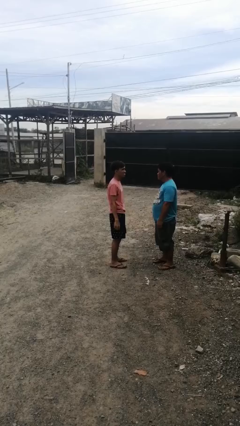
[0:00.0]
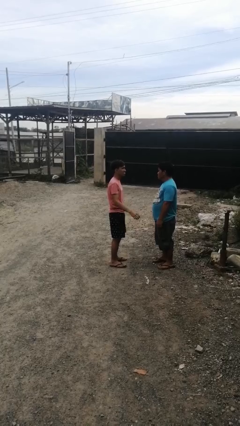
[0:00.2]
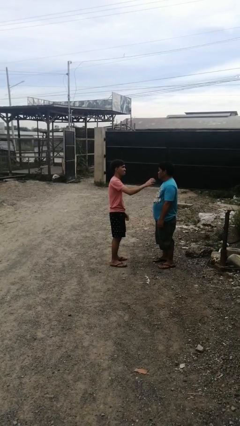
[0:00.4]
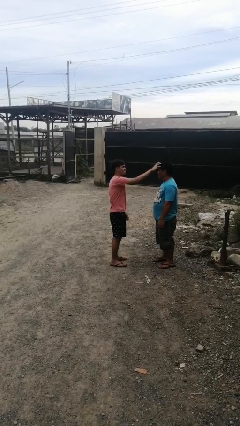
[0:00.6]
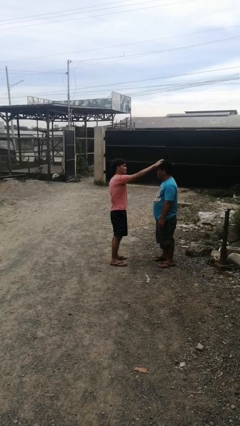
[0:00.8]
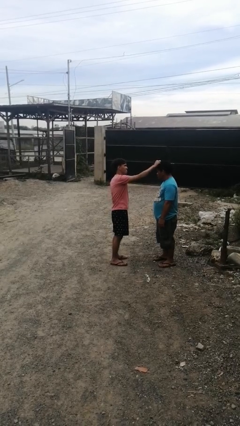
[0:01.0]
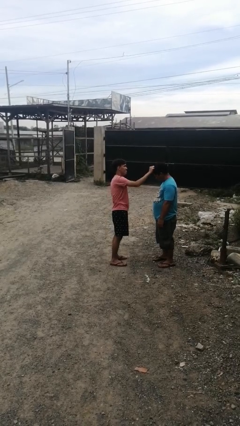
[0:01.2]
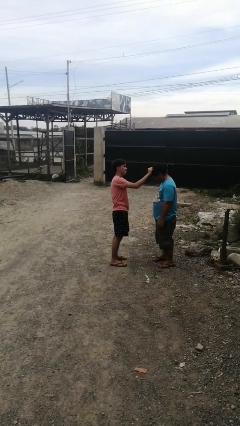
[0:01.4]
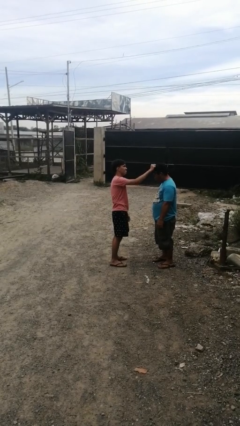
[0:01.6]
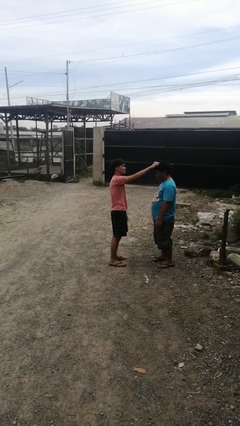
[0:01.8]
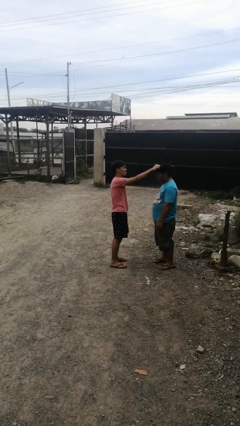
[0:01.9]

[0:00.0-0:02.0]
person grabs person by hair

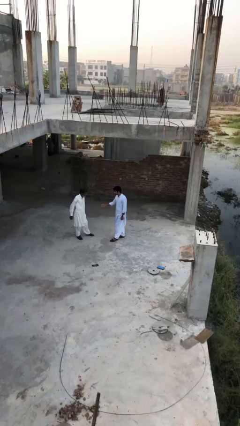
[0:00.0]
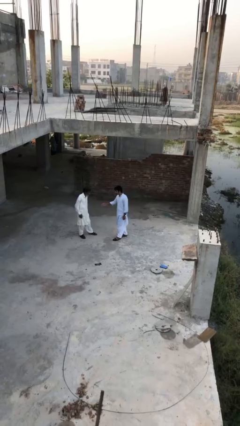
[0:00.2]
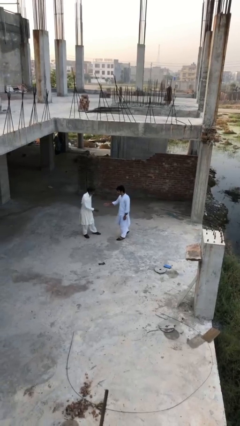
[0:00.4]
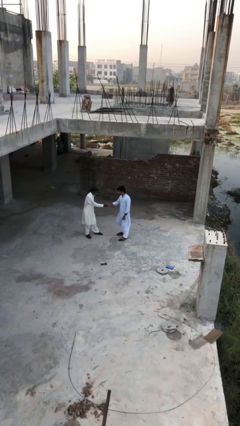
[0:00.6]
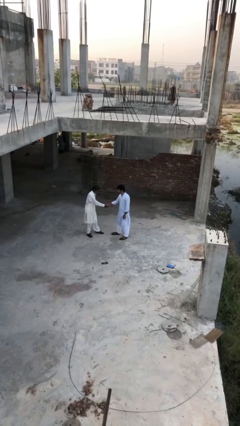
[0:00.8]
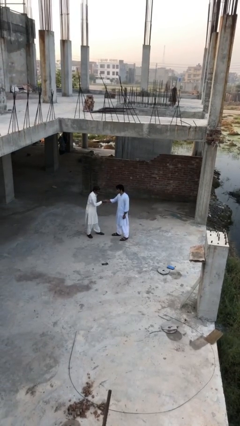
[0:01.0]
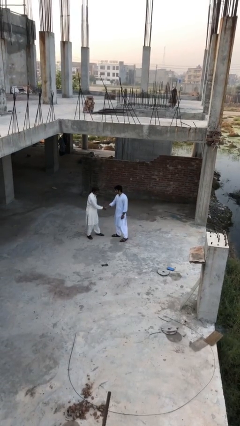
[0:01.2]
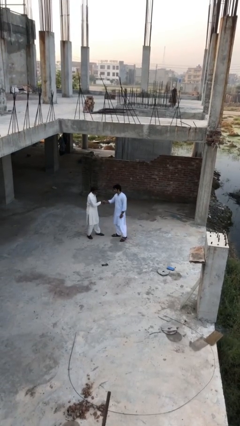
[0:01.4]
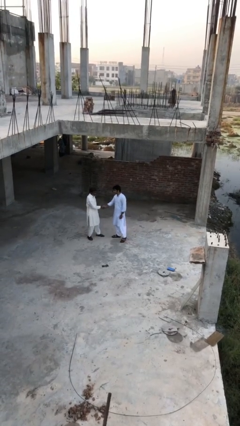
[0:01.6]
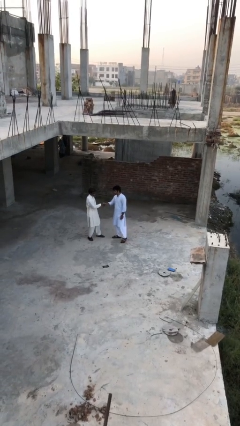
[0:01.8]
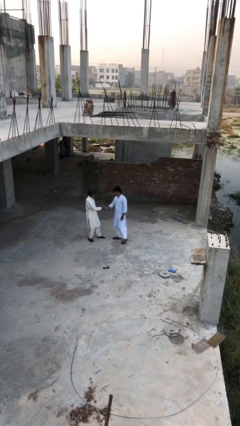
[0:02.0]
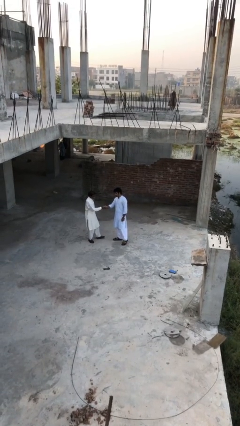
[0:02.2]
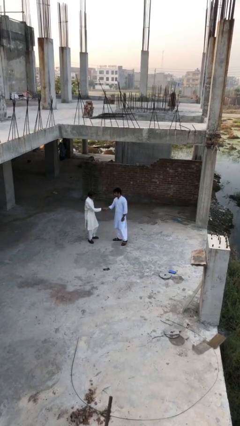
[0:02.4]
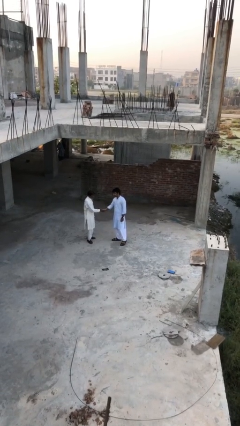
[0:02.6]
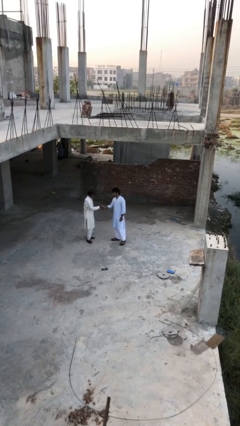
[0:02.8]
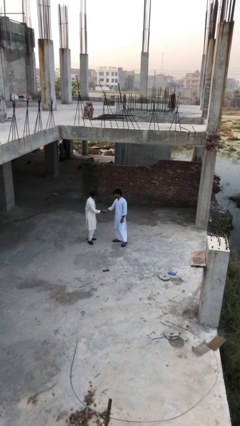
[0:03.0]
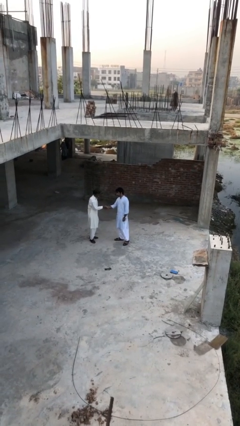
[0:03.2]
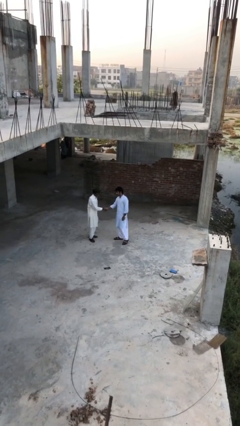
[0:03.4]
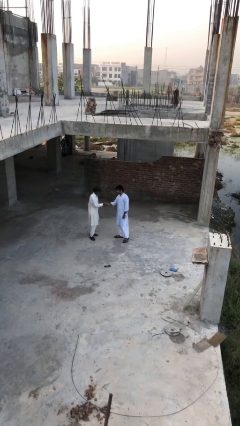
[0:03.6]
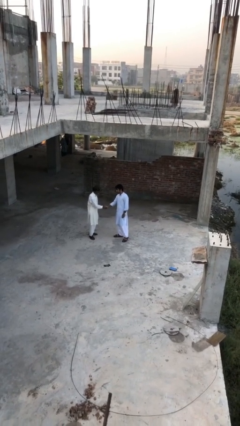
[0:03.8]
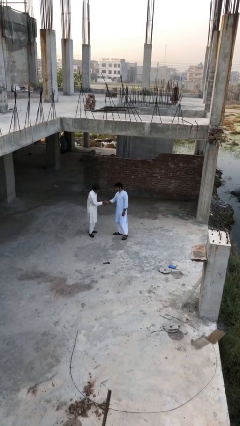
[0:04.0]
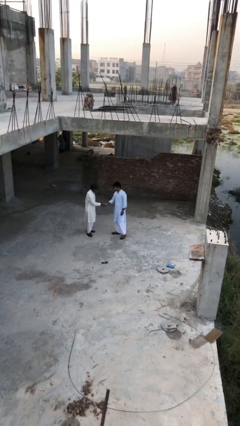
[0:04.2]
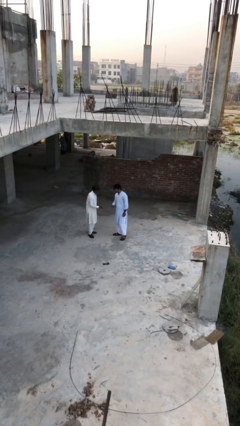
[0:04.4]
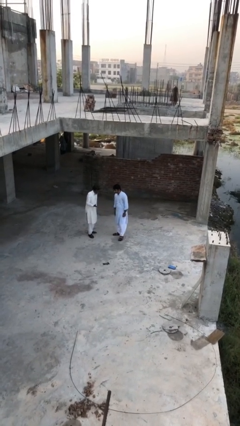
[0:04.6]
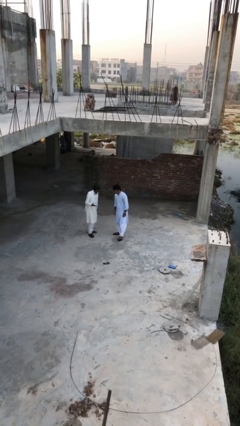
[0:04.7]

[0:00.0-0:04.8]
person shakes hand

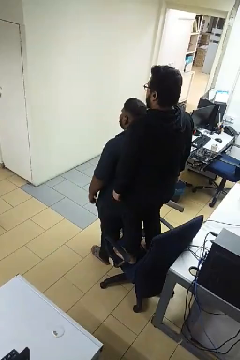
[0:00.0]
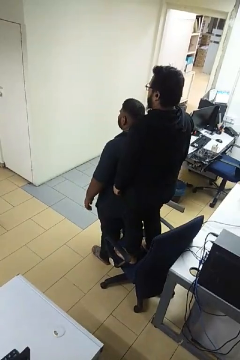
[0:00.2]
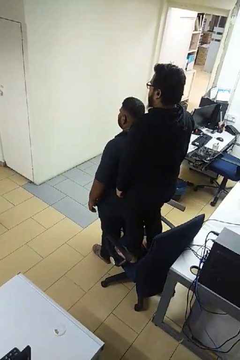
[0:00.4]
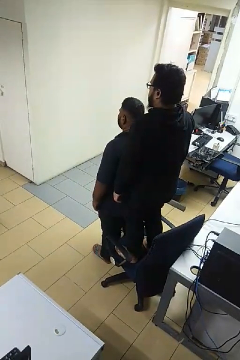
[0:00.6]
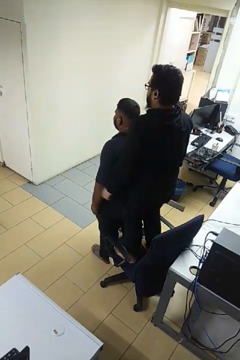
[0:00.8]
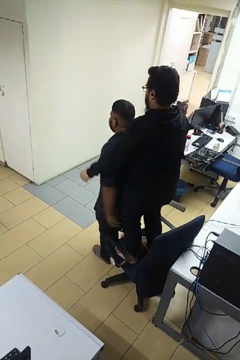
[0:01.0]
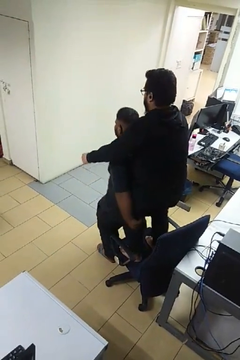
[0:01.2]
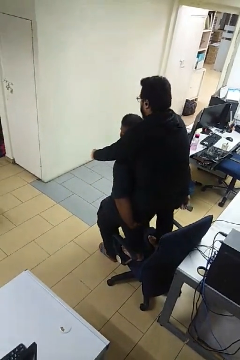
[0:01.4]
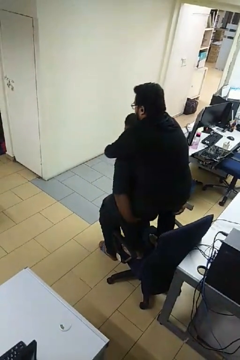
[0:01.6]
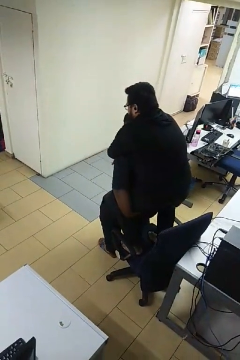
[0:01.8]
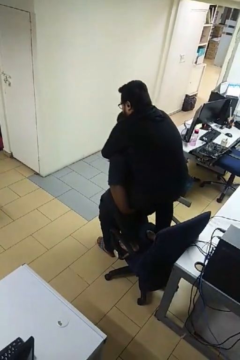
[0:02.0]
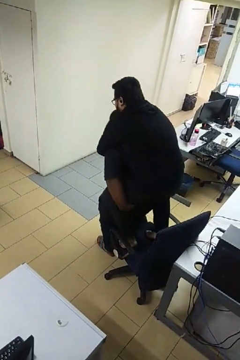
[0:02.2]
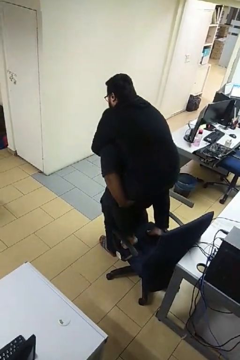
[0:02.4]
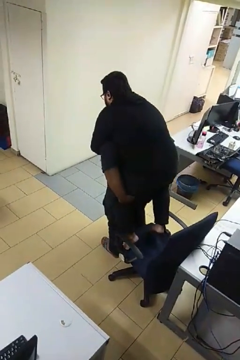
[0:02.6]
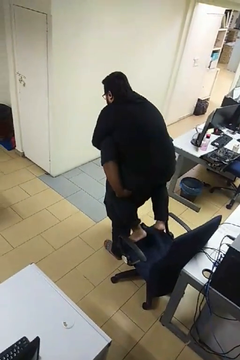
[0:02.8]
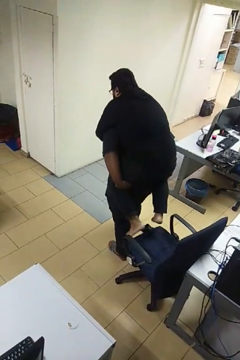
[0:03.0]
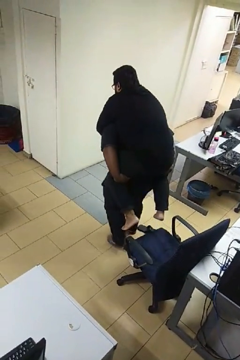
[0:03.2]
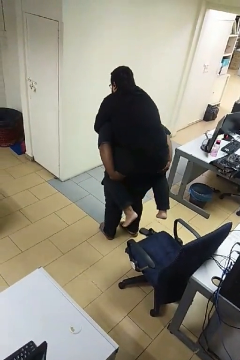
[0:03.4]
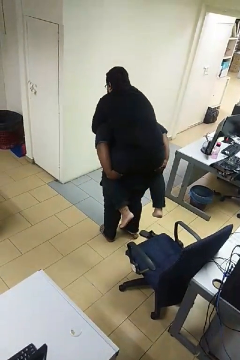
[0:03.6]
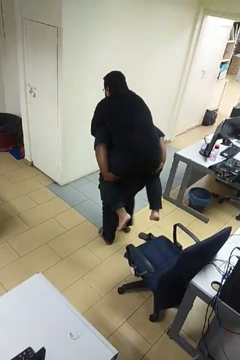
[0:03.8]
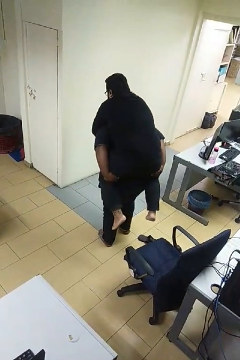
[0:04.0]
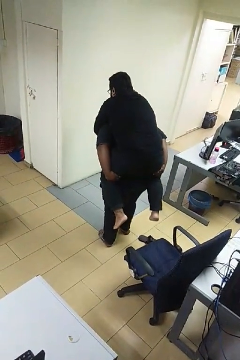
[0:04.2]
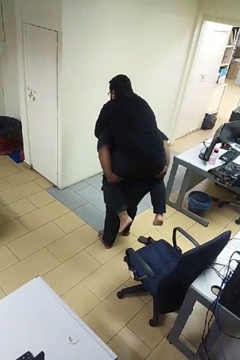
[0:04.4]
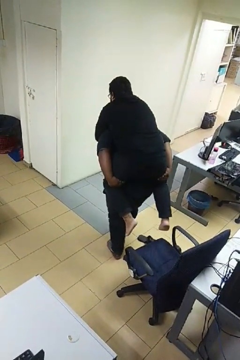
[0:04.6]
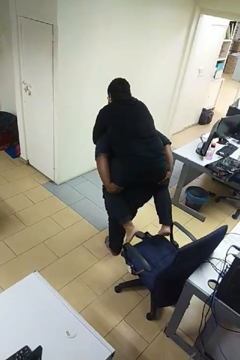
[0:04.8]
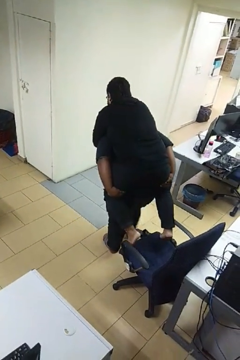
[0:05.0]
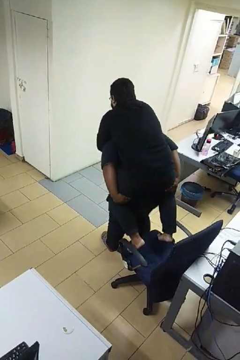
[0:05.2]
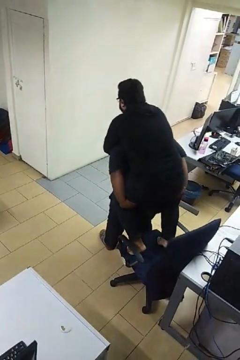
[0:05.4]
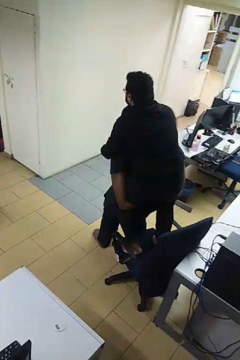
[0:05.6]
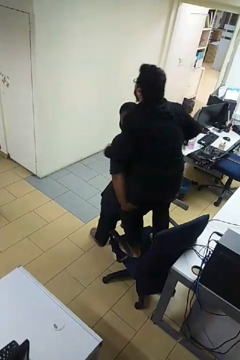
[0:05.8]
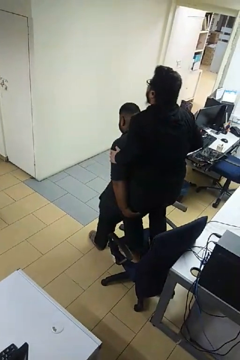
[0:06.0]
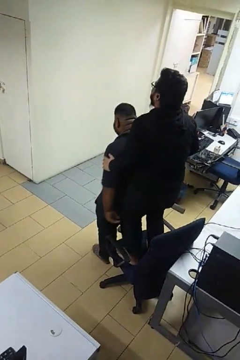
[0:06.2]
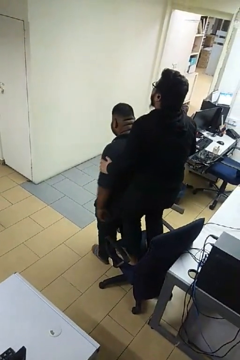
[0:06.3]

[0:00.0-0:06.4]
person carries person on back

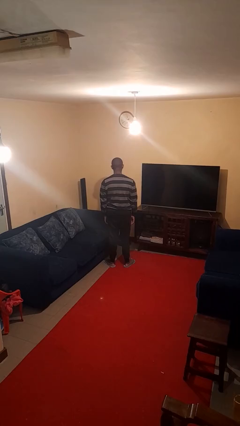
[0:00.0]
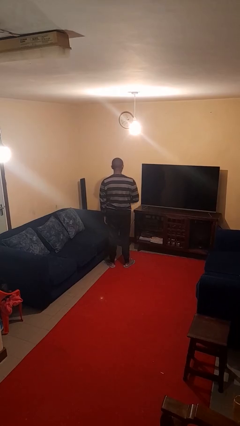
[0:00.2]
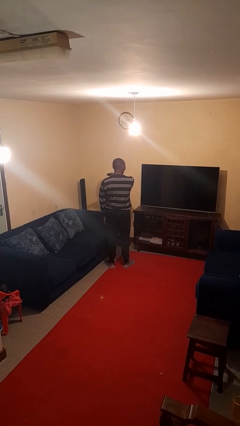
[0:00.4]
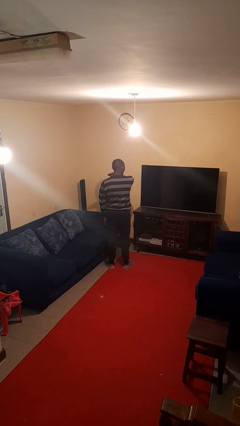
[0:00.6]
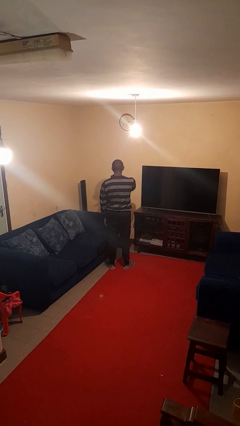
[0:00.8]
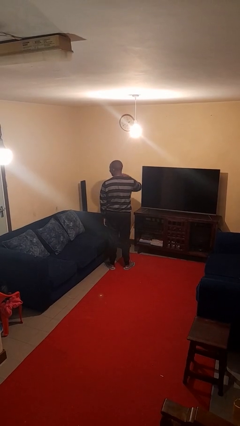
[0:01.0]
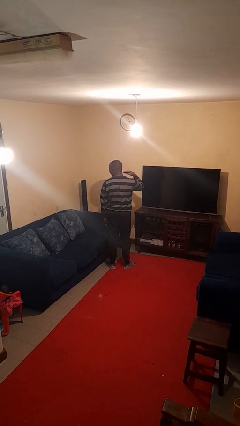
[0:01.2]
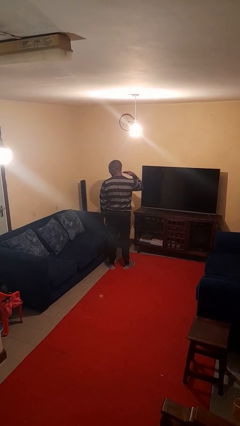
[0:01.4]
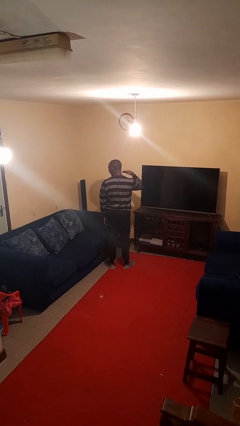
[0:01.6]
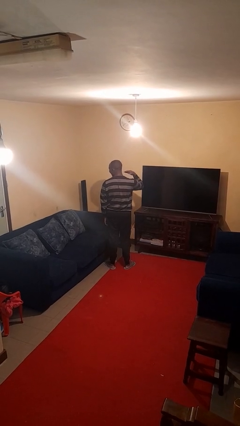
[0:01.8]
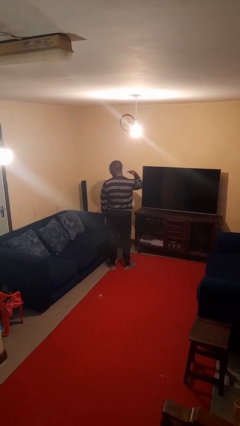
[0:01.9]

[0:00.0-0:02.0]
person gestures cut

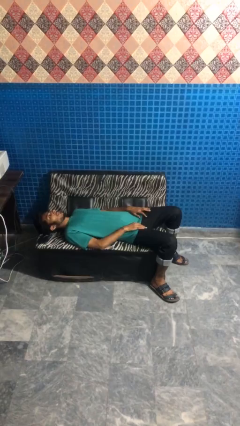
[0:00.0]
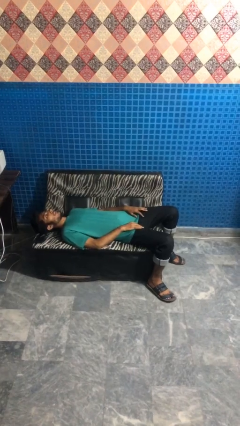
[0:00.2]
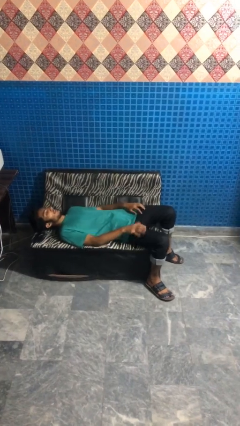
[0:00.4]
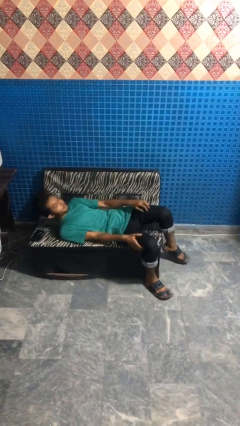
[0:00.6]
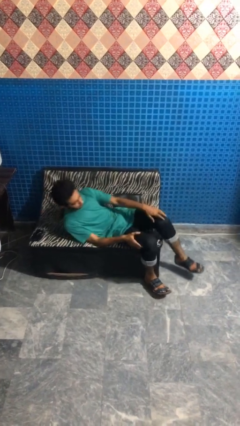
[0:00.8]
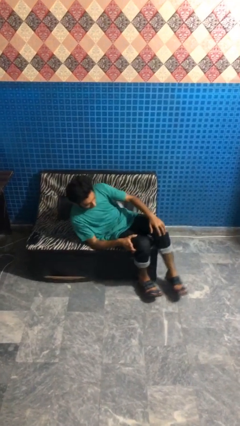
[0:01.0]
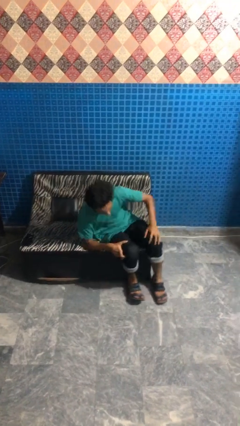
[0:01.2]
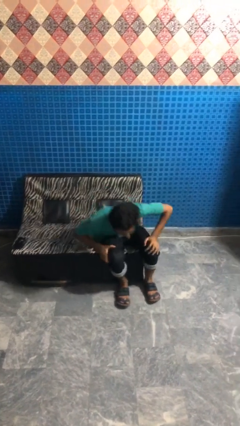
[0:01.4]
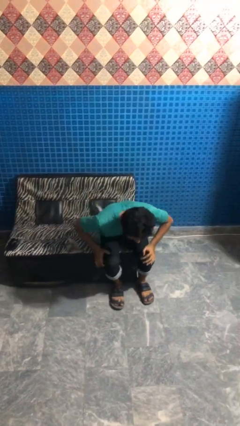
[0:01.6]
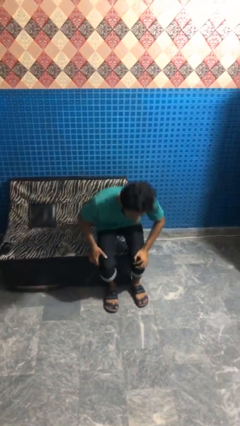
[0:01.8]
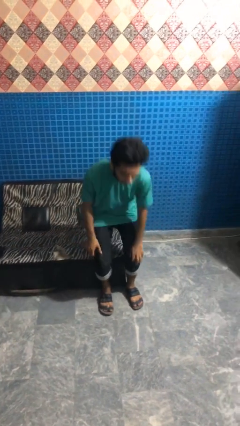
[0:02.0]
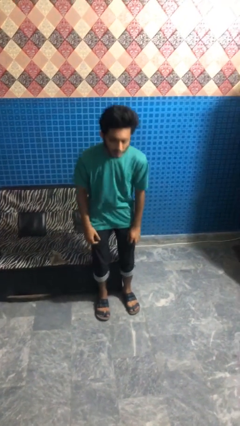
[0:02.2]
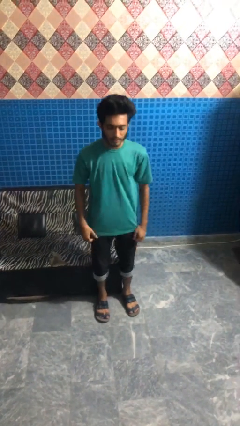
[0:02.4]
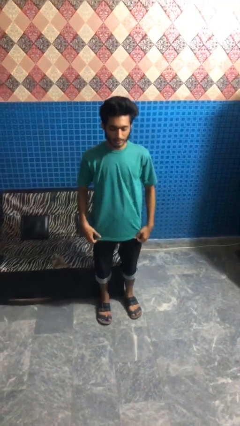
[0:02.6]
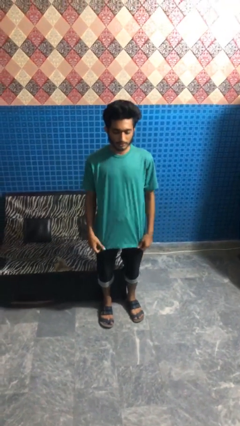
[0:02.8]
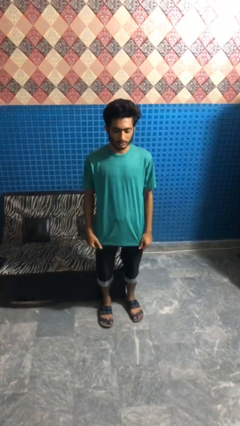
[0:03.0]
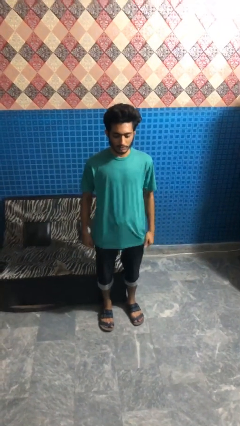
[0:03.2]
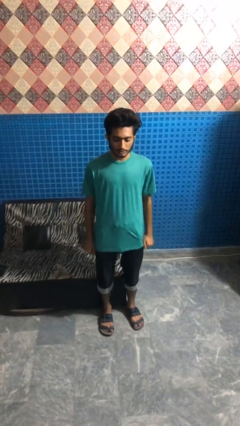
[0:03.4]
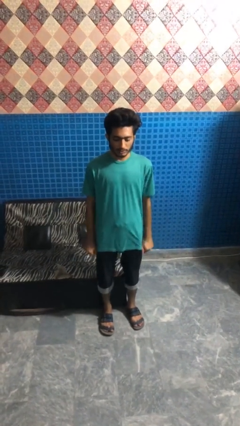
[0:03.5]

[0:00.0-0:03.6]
person stands up
